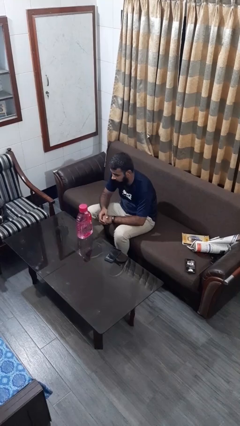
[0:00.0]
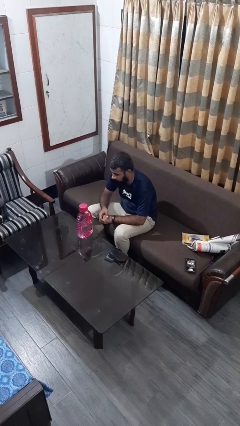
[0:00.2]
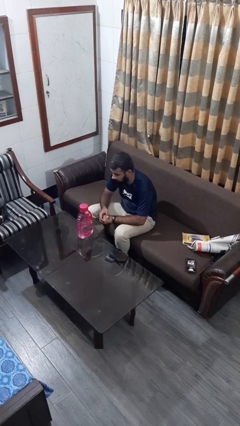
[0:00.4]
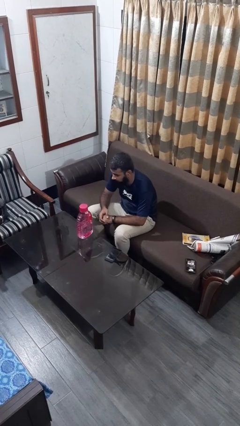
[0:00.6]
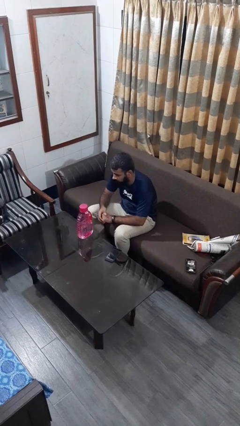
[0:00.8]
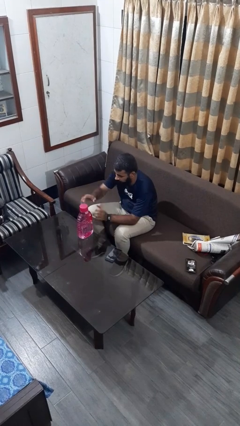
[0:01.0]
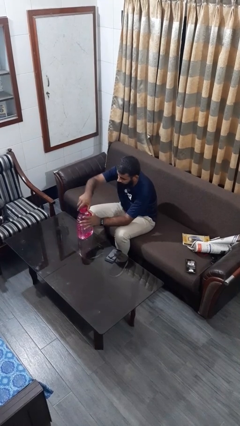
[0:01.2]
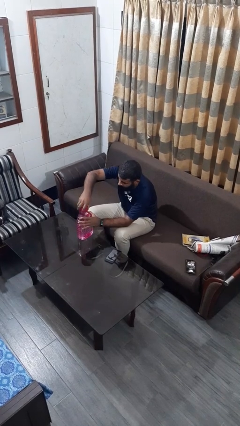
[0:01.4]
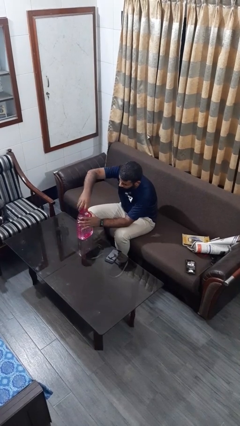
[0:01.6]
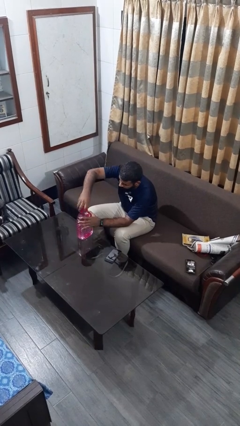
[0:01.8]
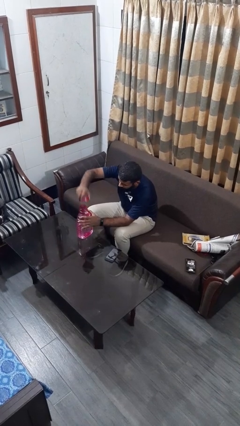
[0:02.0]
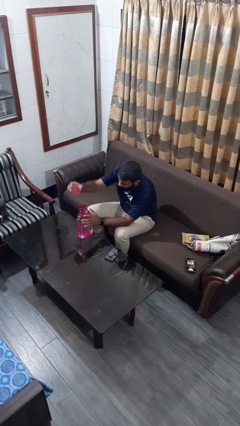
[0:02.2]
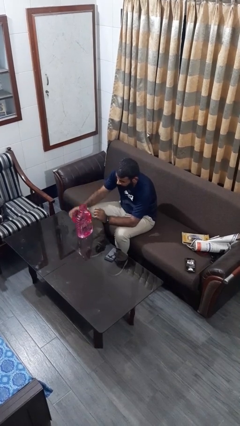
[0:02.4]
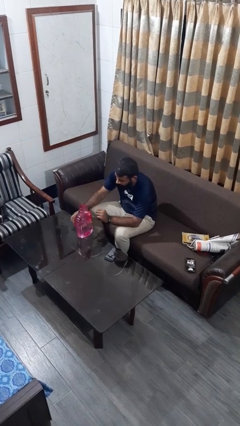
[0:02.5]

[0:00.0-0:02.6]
person unscrews lid from bottle

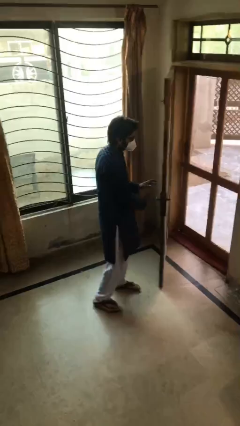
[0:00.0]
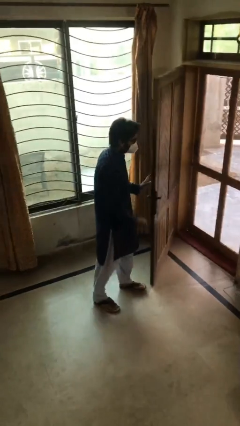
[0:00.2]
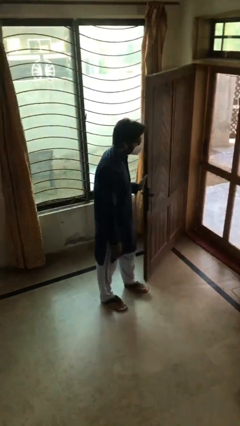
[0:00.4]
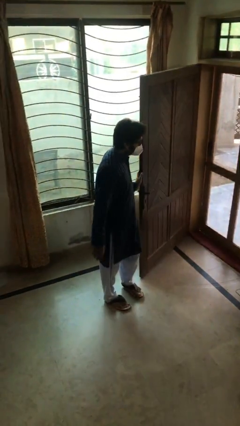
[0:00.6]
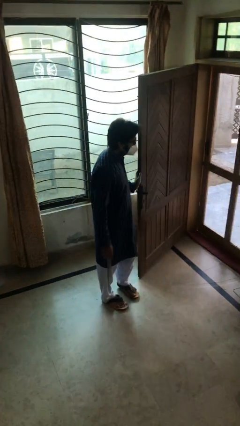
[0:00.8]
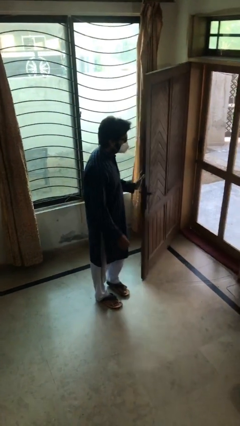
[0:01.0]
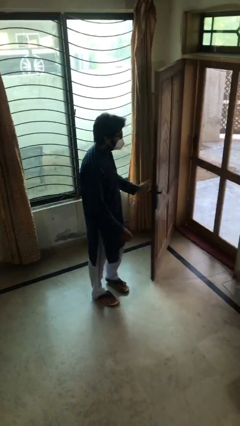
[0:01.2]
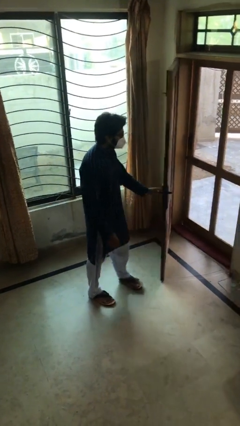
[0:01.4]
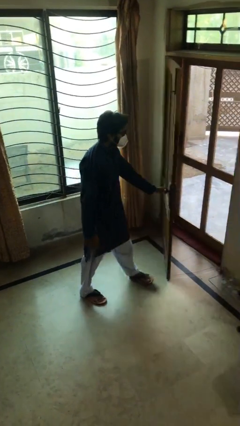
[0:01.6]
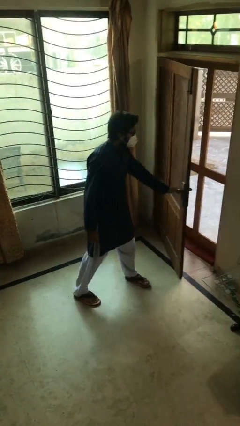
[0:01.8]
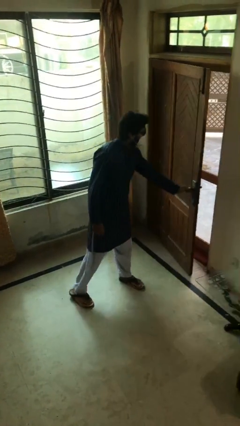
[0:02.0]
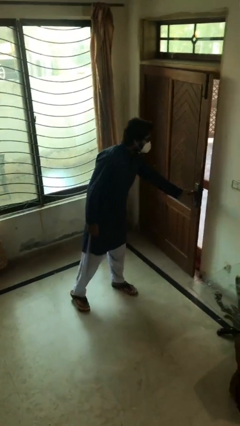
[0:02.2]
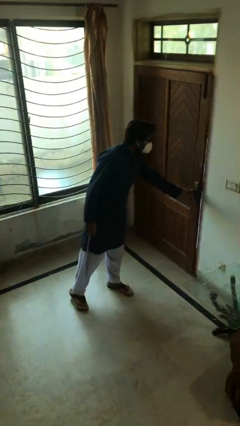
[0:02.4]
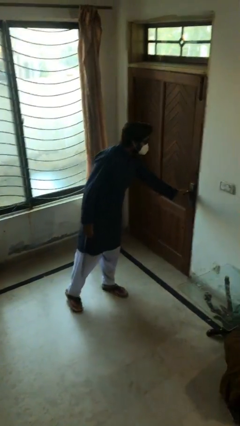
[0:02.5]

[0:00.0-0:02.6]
person closes facility door

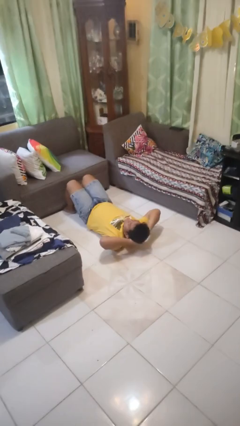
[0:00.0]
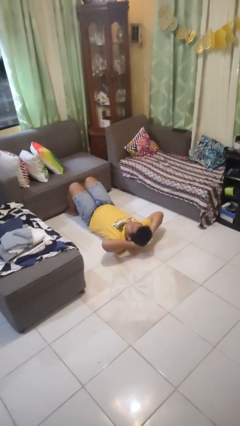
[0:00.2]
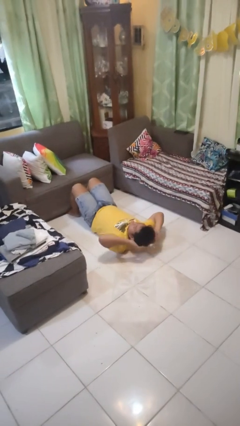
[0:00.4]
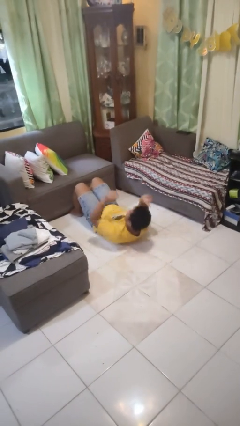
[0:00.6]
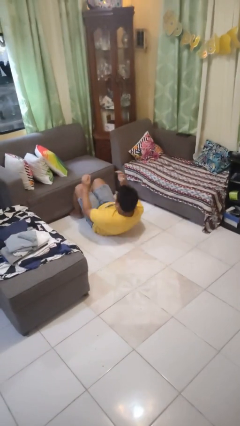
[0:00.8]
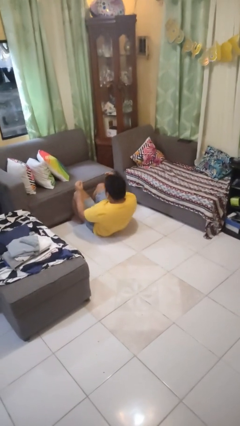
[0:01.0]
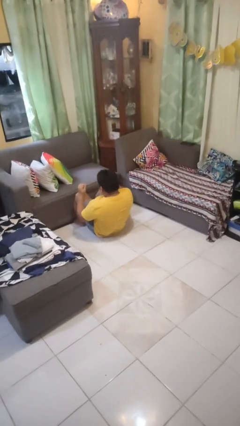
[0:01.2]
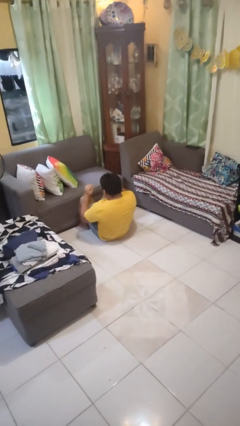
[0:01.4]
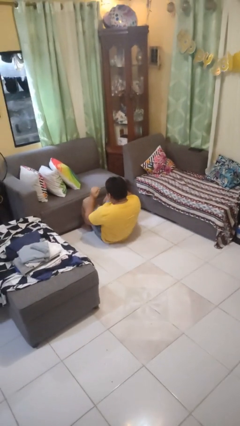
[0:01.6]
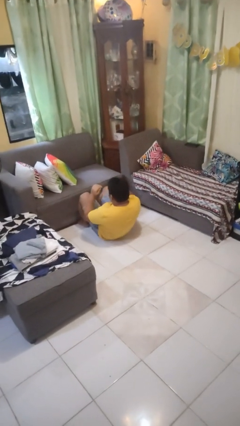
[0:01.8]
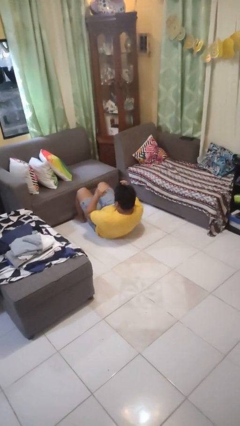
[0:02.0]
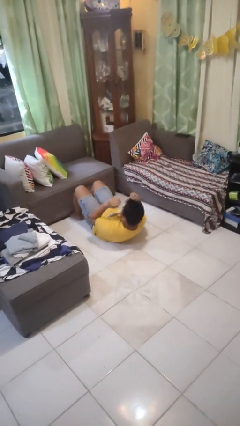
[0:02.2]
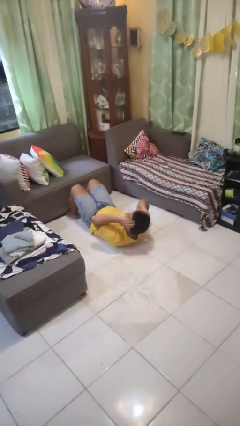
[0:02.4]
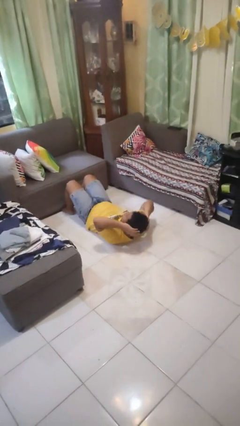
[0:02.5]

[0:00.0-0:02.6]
person exercises with situp

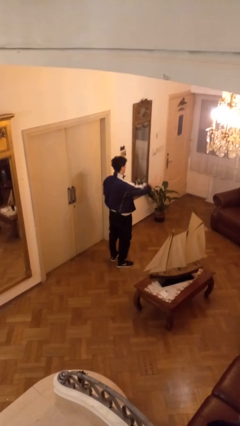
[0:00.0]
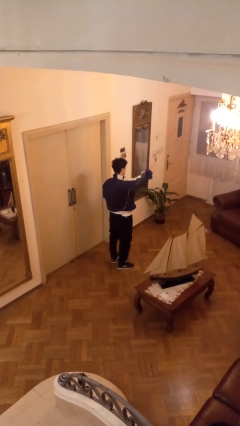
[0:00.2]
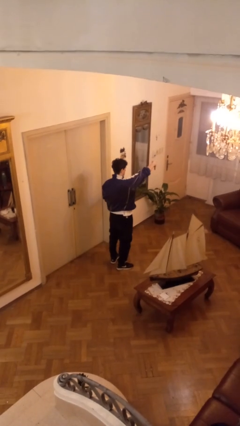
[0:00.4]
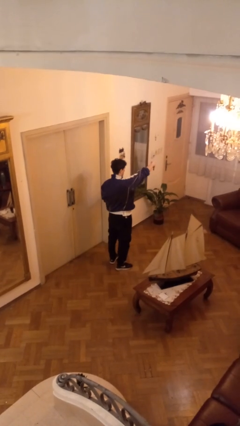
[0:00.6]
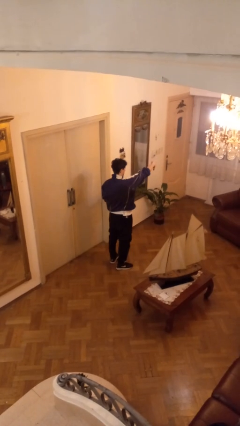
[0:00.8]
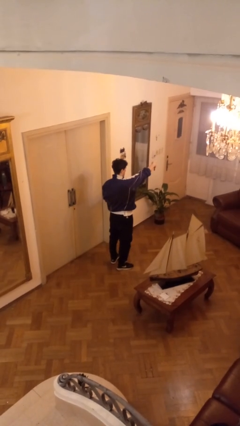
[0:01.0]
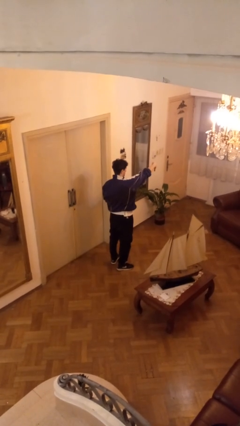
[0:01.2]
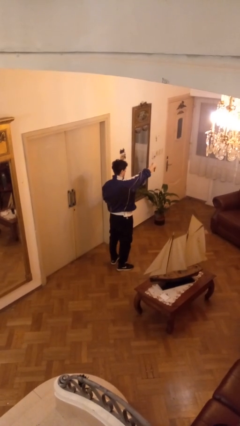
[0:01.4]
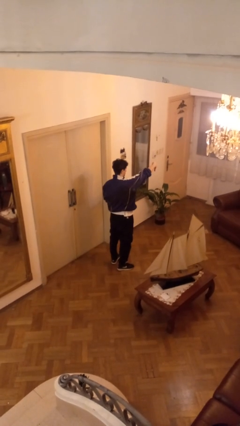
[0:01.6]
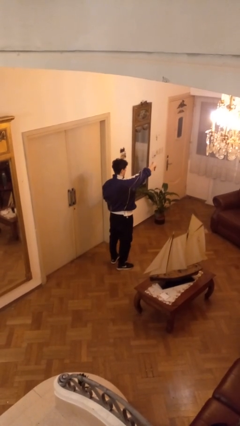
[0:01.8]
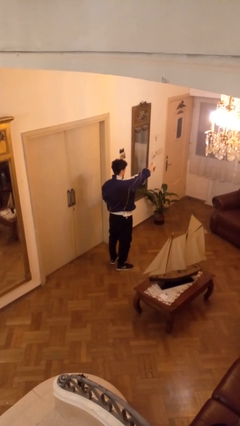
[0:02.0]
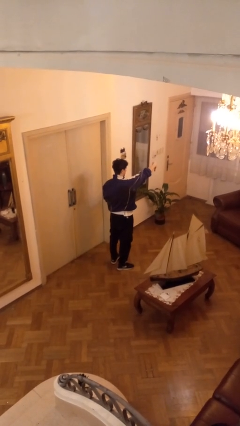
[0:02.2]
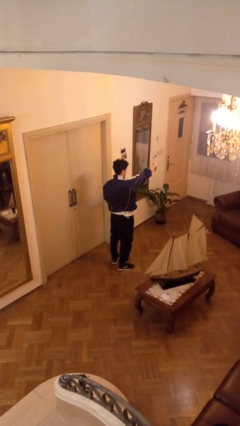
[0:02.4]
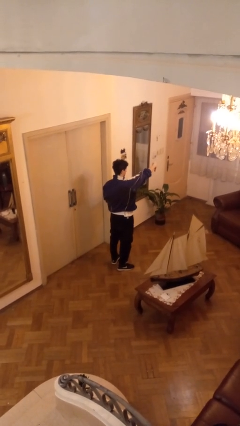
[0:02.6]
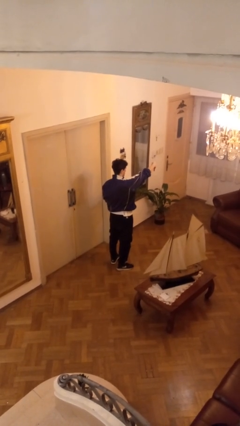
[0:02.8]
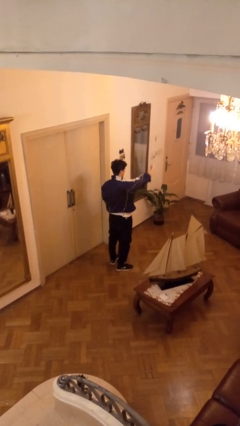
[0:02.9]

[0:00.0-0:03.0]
person gestures thumbs down

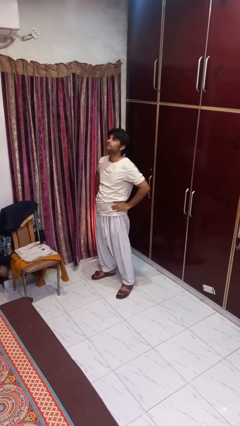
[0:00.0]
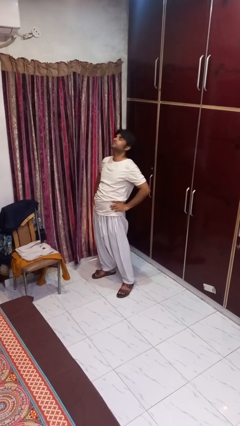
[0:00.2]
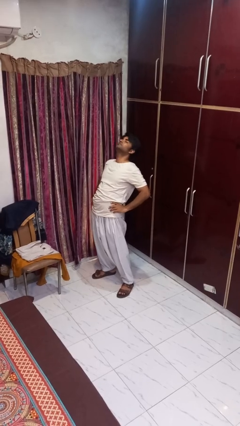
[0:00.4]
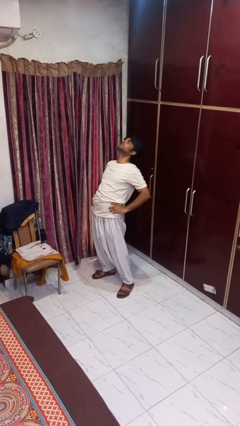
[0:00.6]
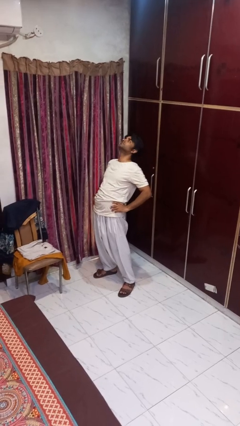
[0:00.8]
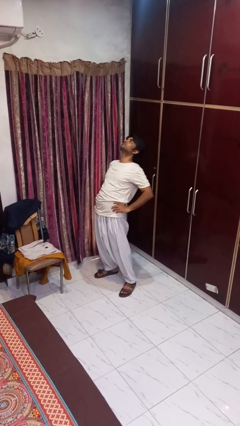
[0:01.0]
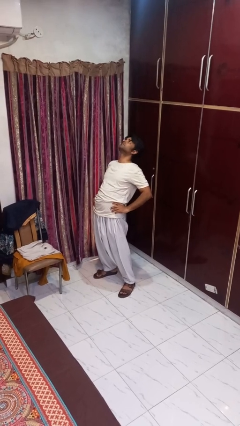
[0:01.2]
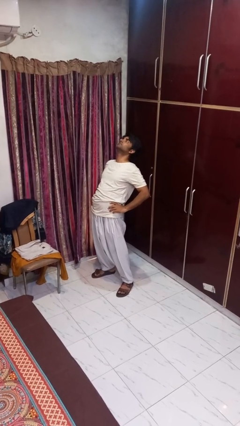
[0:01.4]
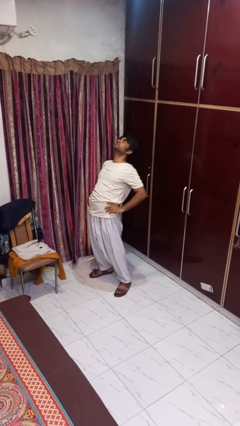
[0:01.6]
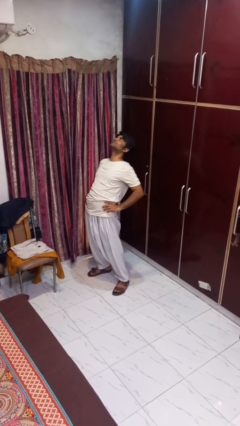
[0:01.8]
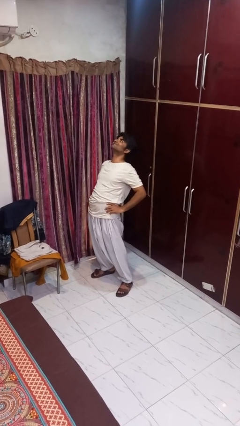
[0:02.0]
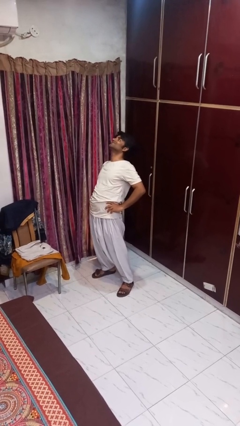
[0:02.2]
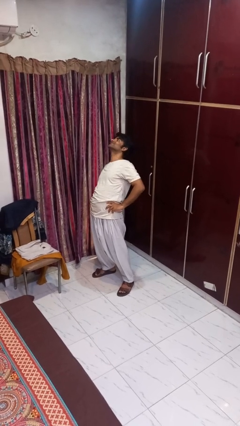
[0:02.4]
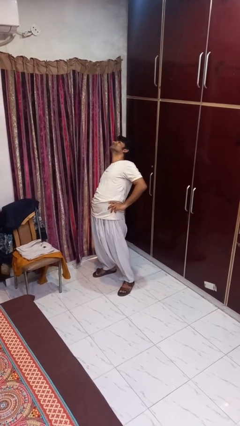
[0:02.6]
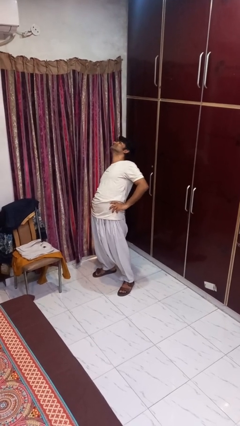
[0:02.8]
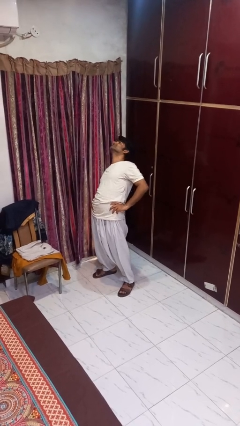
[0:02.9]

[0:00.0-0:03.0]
person stretches back

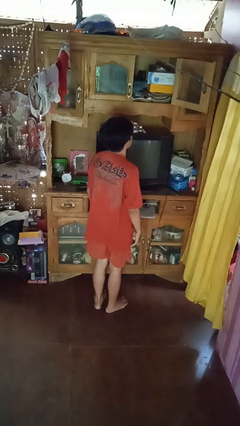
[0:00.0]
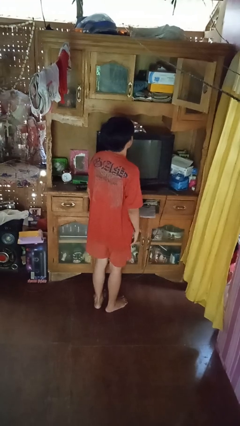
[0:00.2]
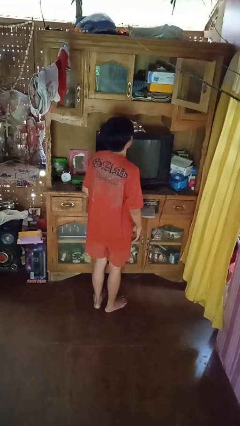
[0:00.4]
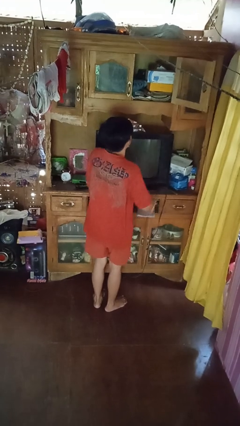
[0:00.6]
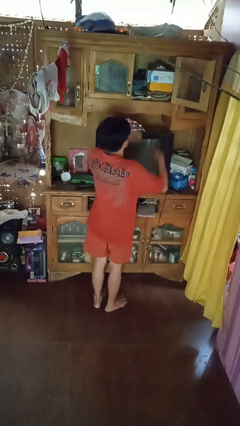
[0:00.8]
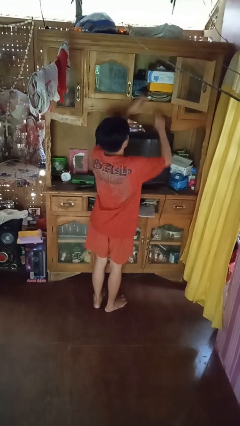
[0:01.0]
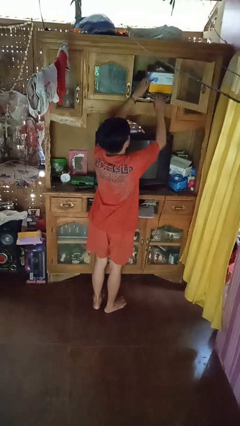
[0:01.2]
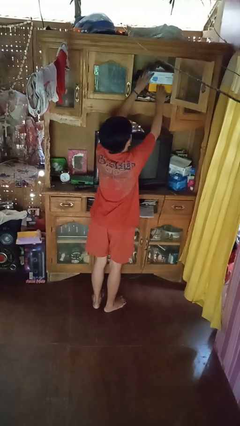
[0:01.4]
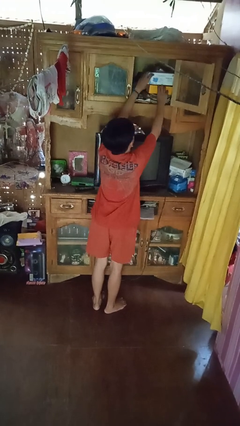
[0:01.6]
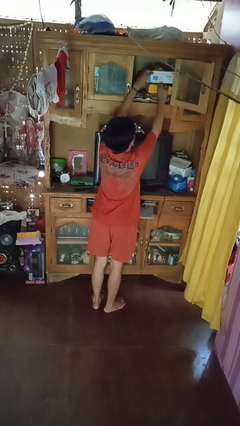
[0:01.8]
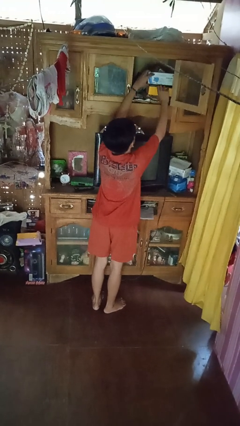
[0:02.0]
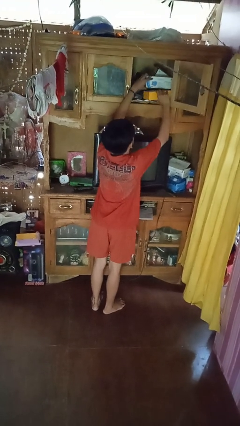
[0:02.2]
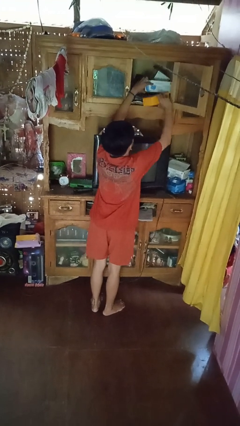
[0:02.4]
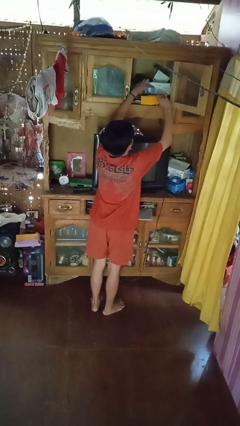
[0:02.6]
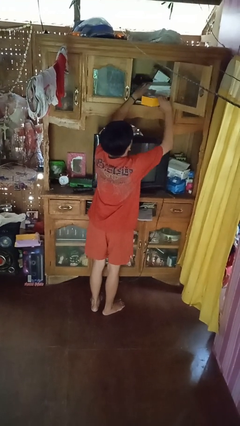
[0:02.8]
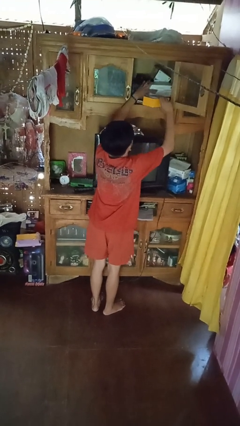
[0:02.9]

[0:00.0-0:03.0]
person picks up object from shelf

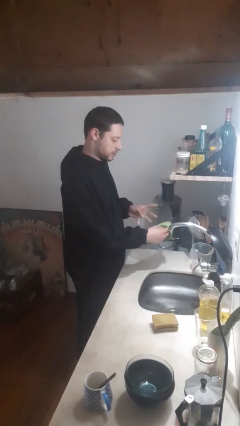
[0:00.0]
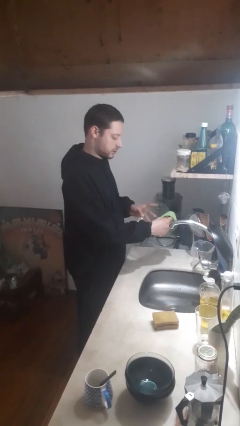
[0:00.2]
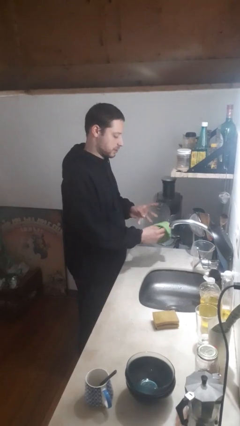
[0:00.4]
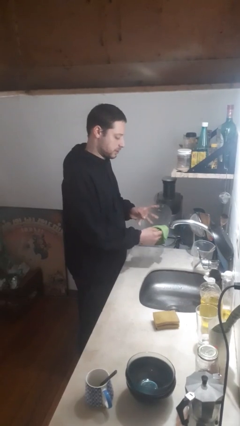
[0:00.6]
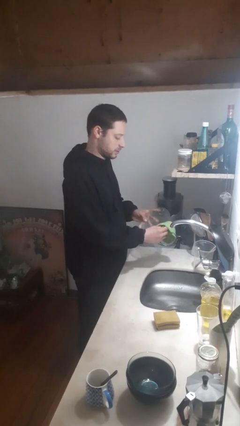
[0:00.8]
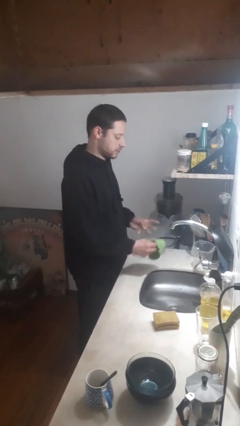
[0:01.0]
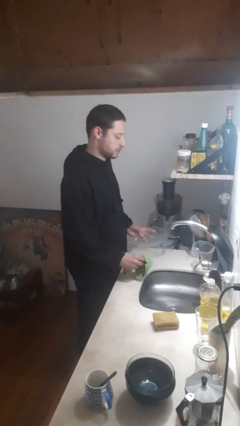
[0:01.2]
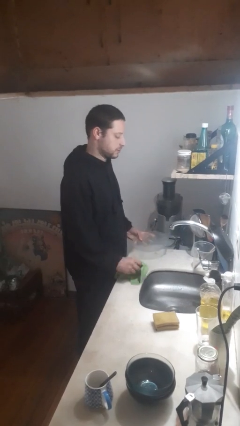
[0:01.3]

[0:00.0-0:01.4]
person dries dish
